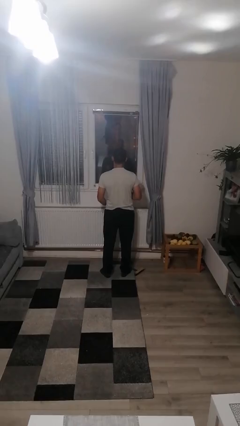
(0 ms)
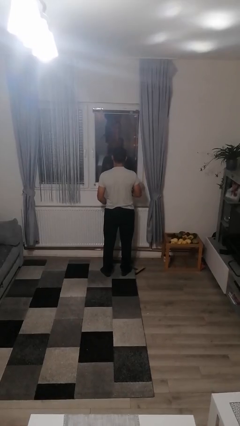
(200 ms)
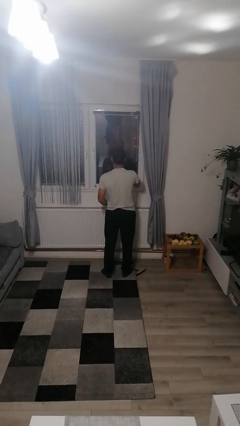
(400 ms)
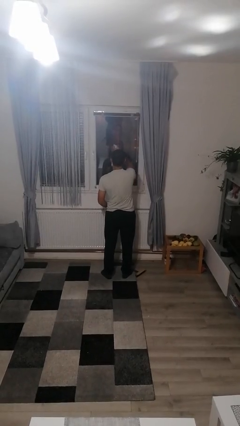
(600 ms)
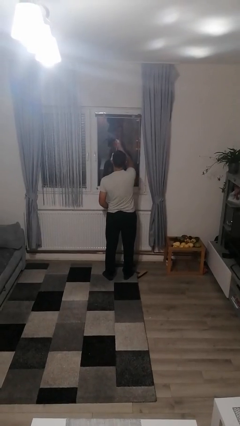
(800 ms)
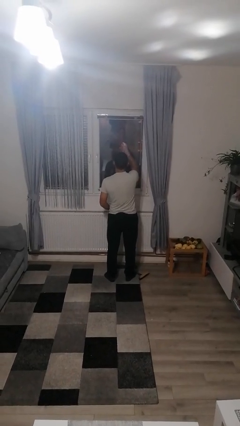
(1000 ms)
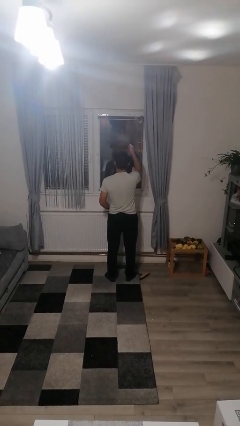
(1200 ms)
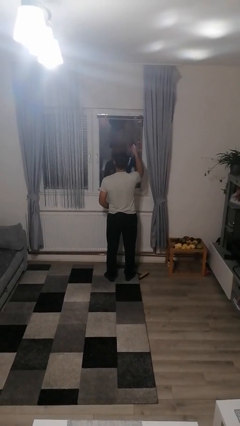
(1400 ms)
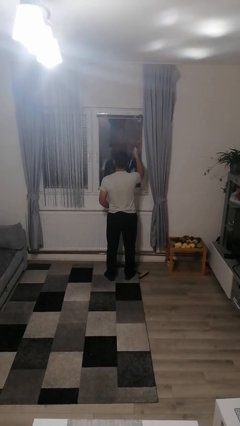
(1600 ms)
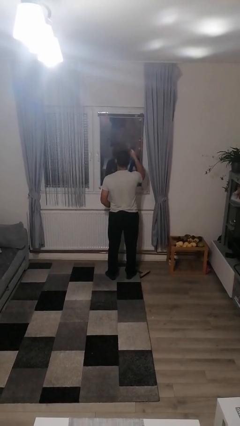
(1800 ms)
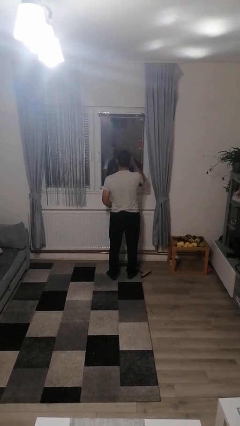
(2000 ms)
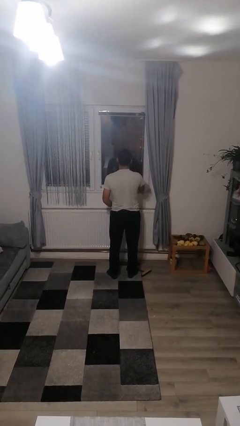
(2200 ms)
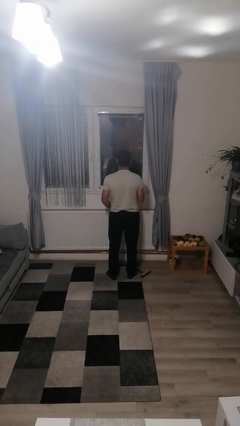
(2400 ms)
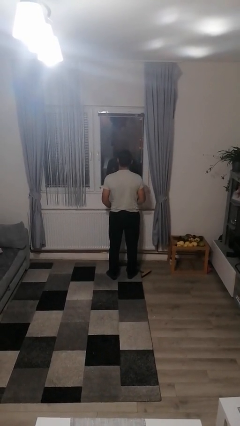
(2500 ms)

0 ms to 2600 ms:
person sprays from bottle

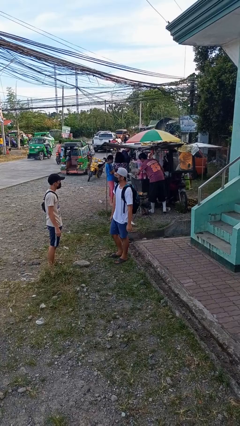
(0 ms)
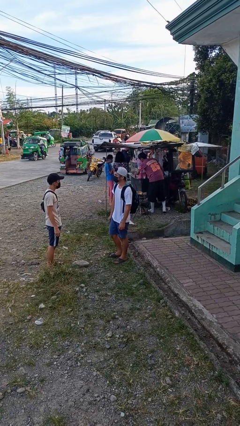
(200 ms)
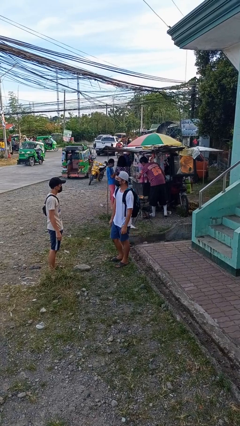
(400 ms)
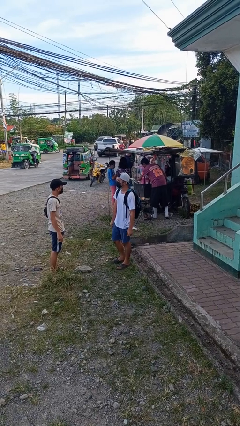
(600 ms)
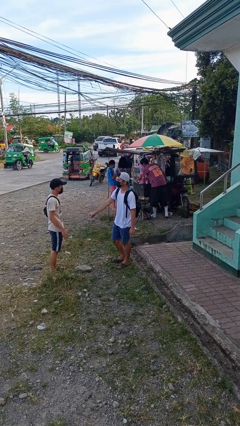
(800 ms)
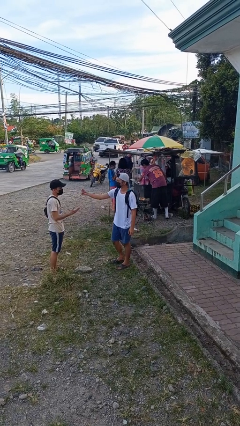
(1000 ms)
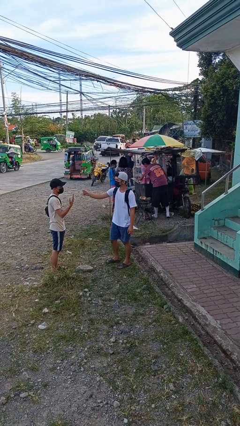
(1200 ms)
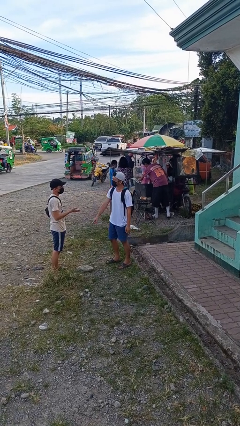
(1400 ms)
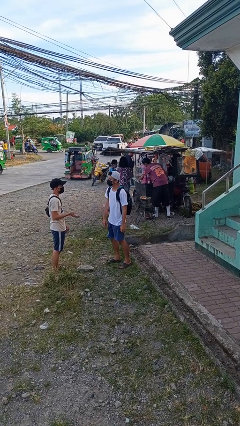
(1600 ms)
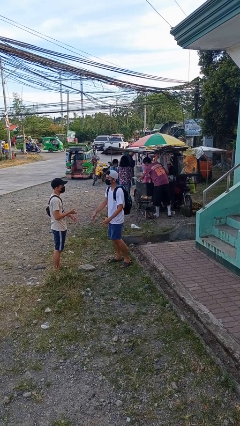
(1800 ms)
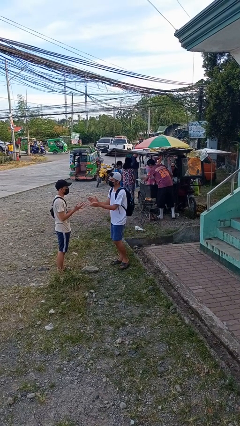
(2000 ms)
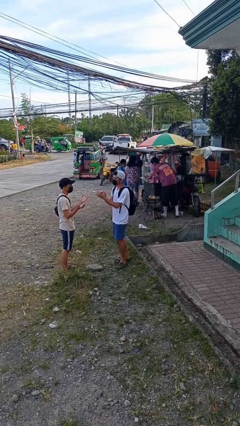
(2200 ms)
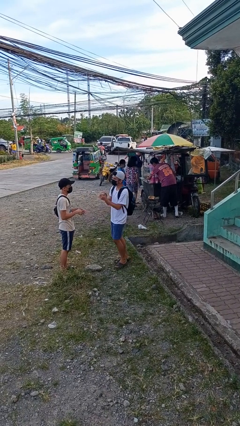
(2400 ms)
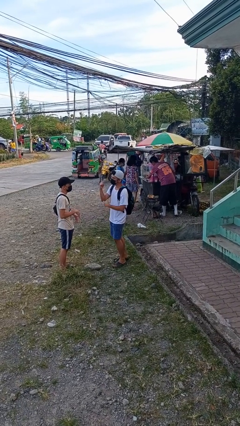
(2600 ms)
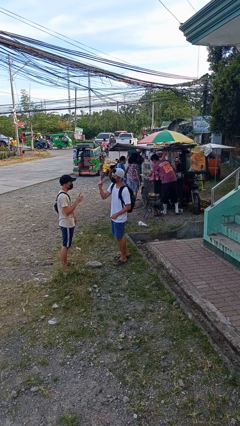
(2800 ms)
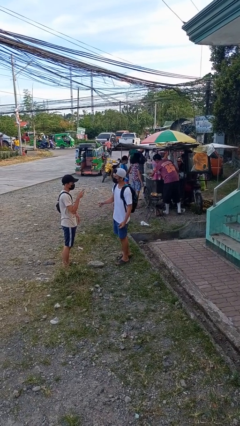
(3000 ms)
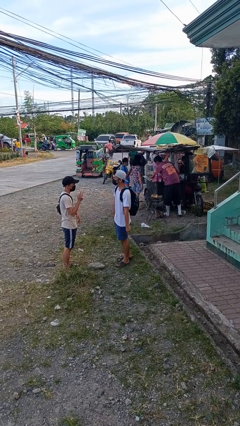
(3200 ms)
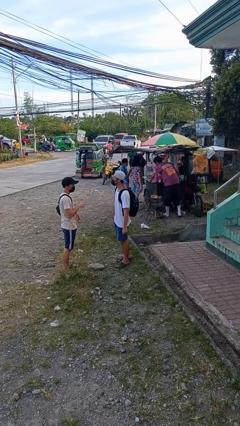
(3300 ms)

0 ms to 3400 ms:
person talks to person

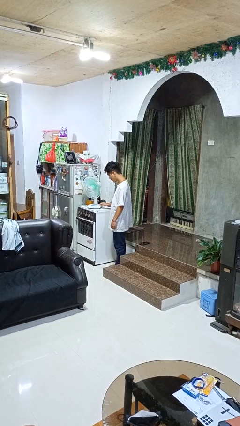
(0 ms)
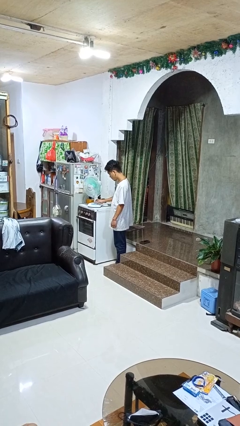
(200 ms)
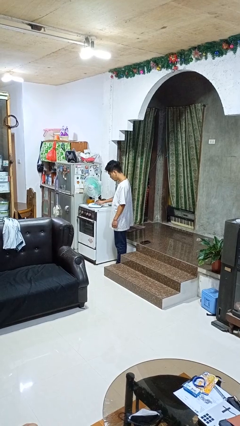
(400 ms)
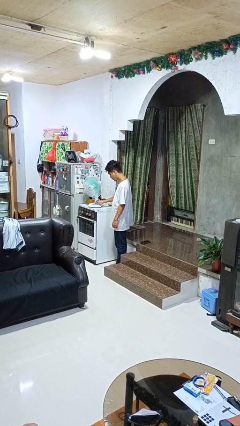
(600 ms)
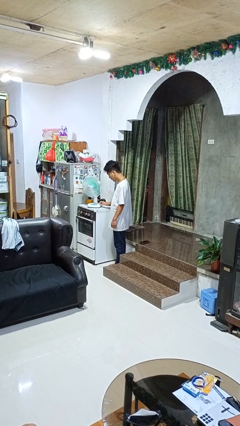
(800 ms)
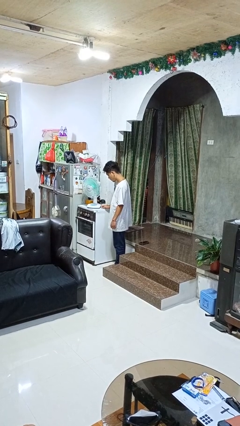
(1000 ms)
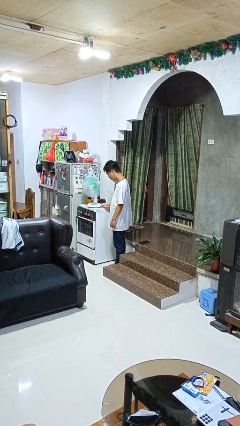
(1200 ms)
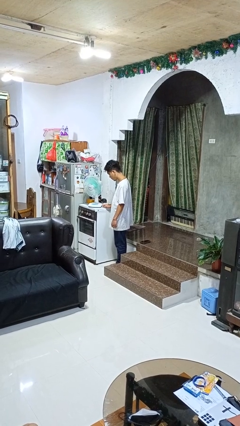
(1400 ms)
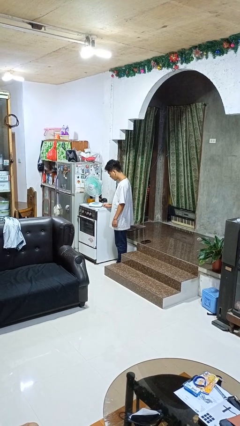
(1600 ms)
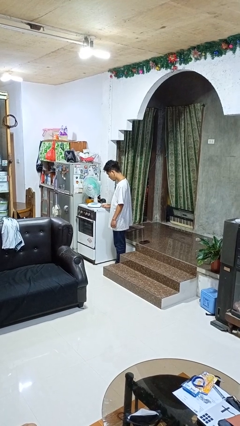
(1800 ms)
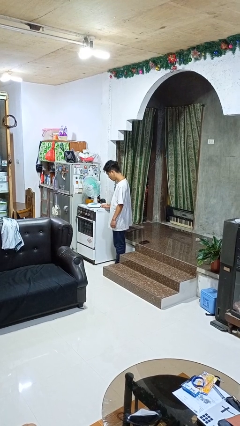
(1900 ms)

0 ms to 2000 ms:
person turns on fan

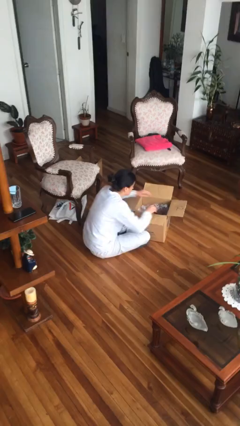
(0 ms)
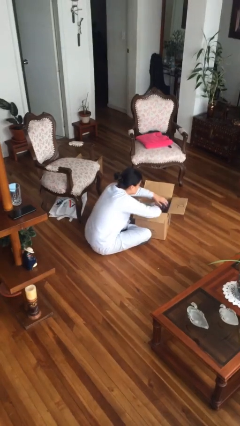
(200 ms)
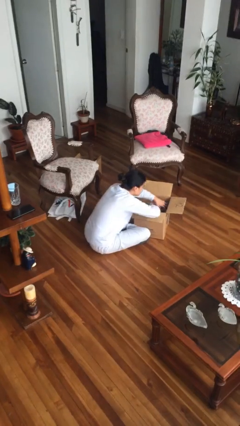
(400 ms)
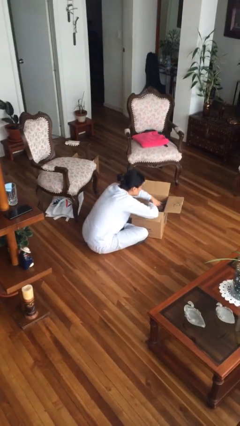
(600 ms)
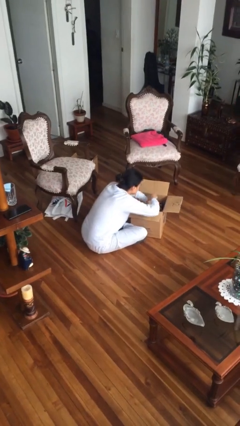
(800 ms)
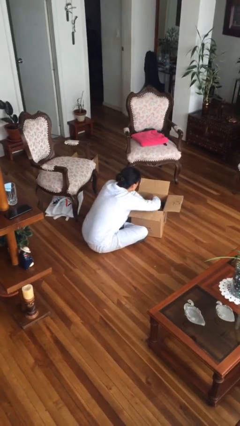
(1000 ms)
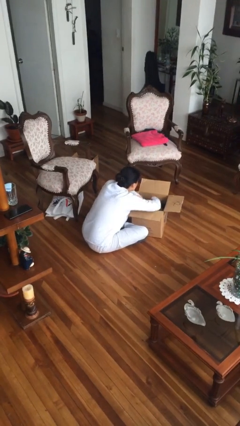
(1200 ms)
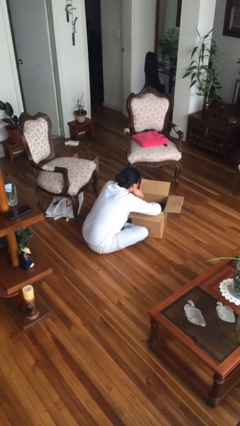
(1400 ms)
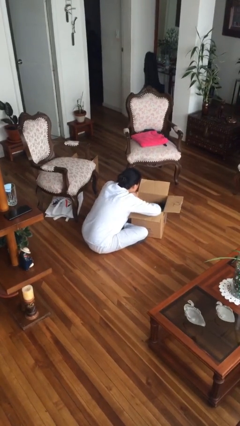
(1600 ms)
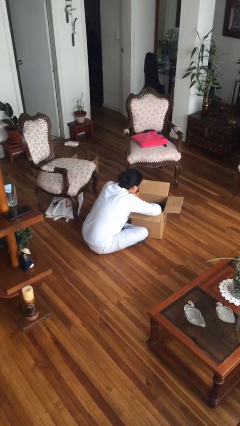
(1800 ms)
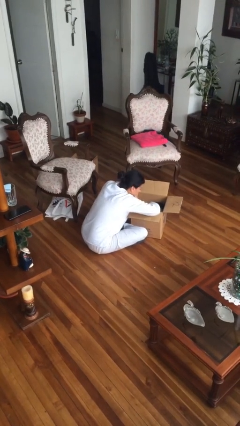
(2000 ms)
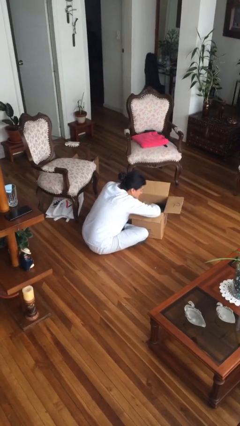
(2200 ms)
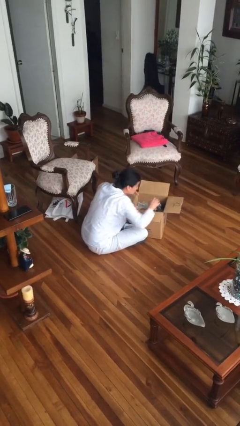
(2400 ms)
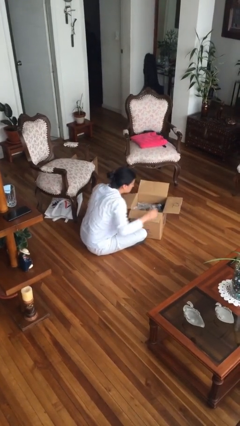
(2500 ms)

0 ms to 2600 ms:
person searches in box

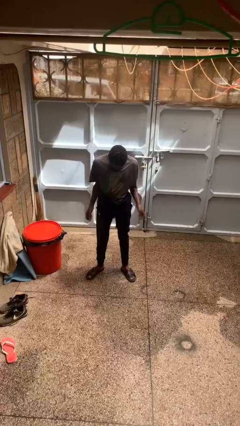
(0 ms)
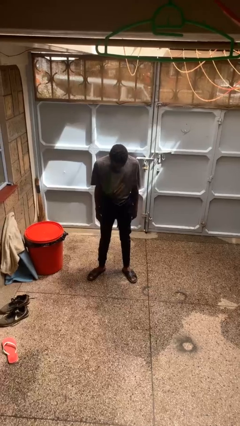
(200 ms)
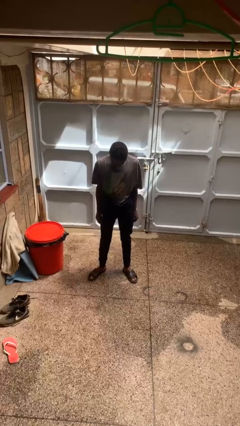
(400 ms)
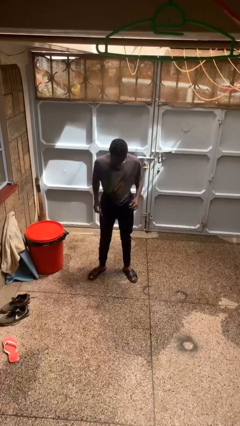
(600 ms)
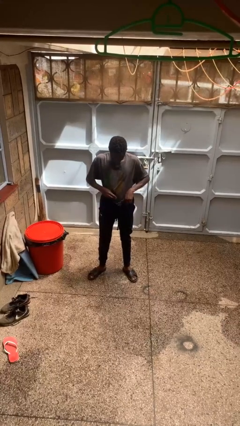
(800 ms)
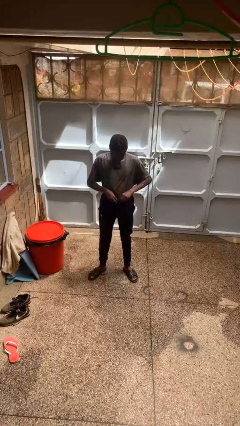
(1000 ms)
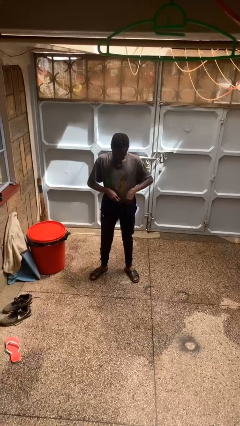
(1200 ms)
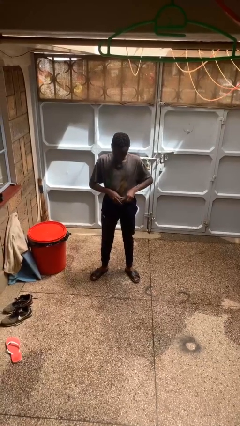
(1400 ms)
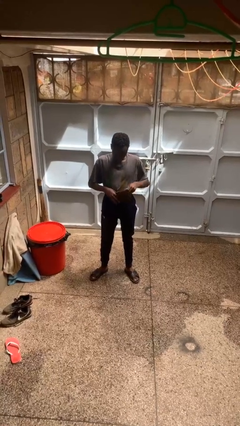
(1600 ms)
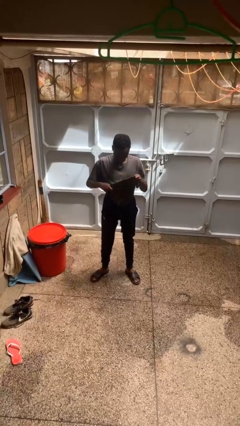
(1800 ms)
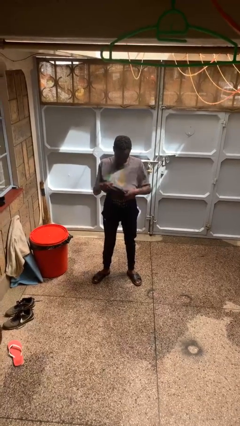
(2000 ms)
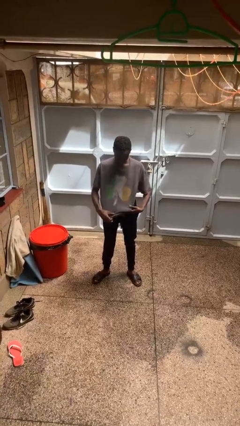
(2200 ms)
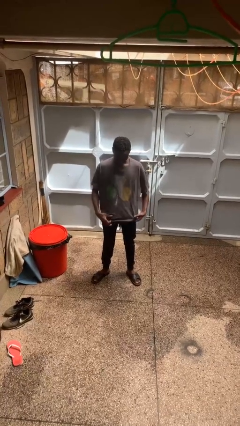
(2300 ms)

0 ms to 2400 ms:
person untucks shirt

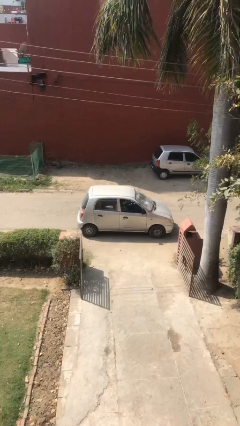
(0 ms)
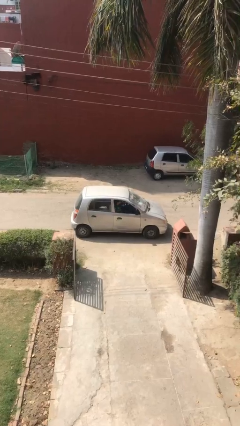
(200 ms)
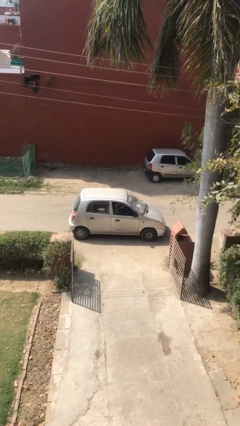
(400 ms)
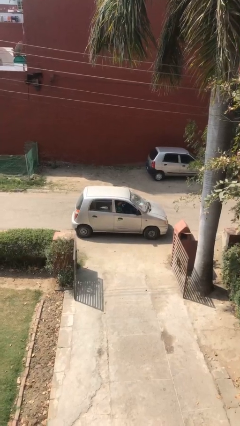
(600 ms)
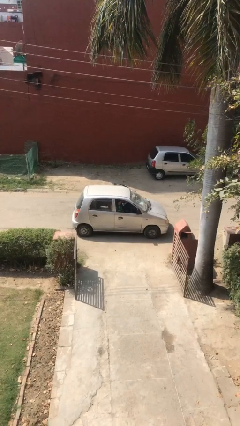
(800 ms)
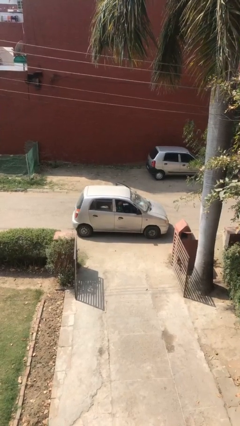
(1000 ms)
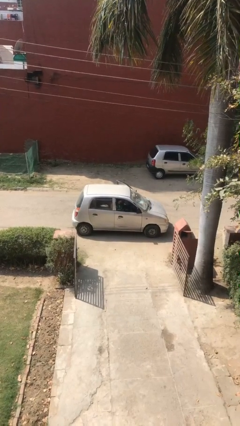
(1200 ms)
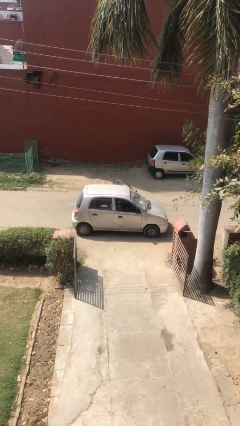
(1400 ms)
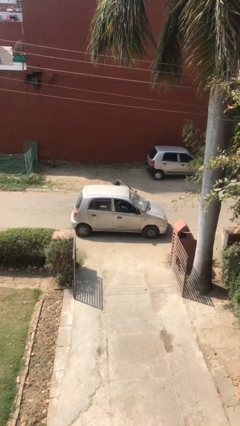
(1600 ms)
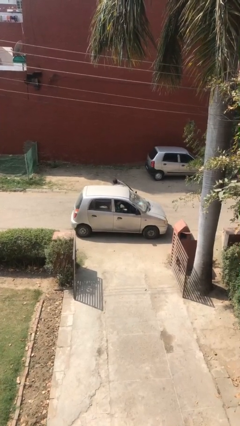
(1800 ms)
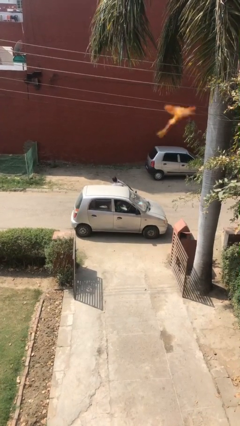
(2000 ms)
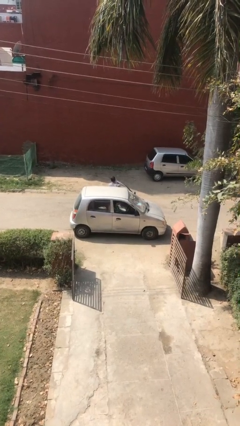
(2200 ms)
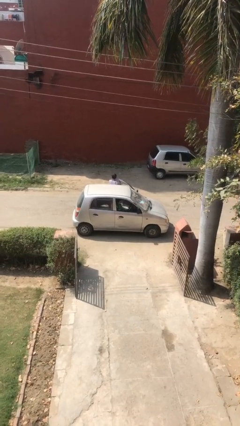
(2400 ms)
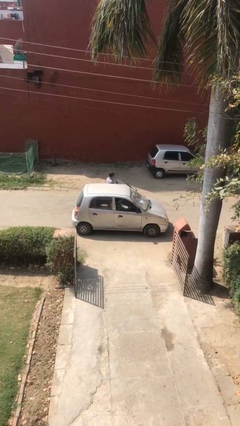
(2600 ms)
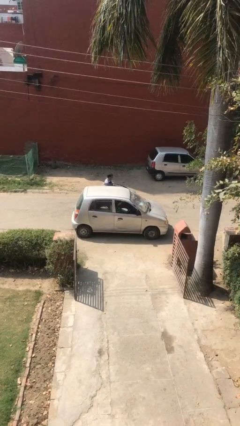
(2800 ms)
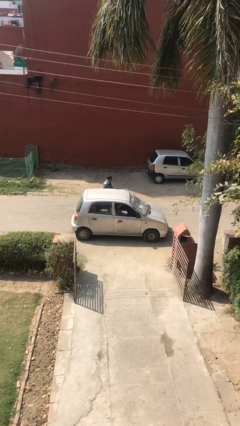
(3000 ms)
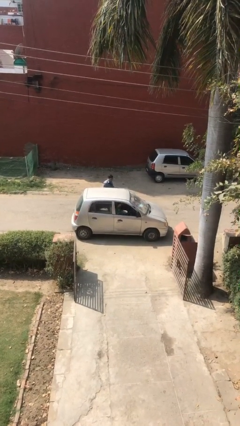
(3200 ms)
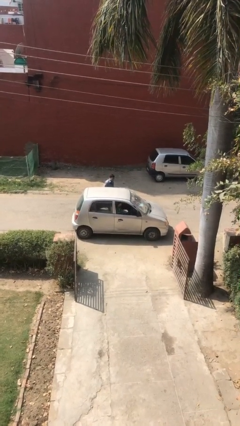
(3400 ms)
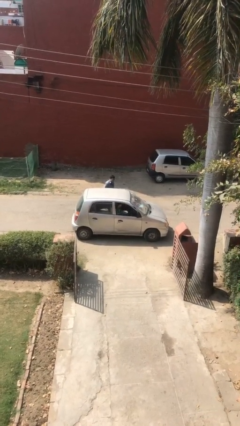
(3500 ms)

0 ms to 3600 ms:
car drops off person

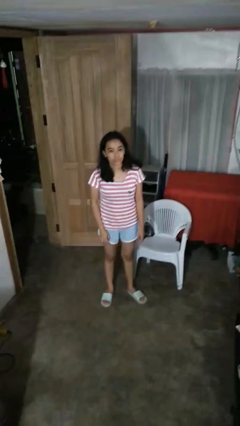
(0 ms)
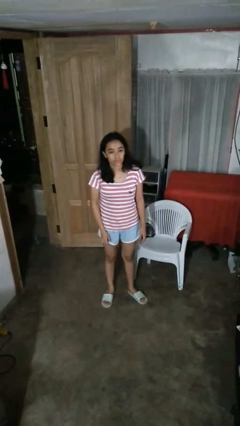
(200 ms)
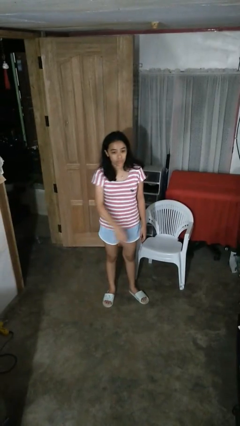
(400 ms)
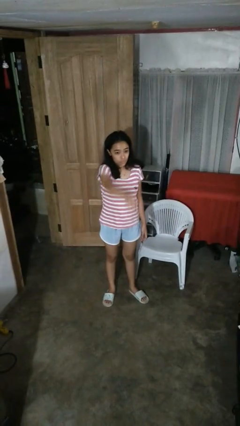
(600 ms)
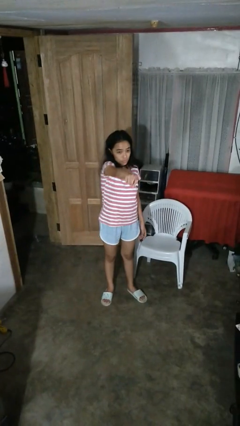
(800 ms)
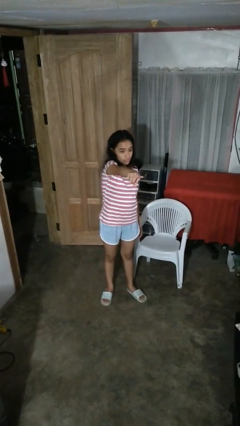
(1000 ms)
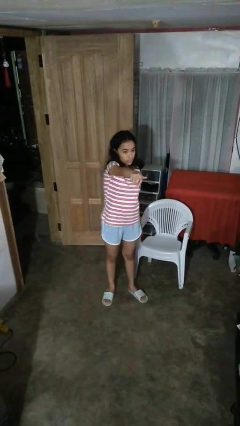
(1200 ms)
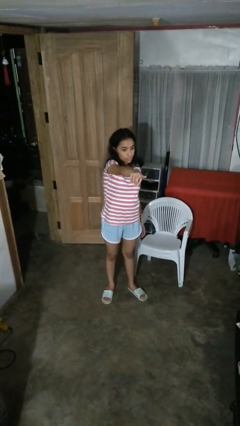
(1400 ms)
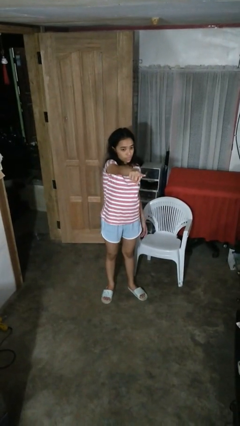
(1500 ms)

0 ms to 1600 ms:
person points at person
